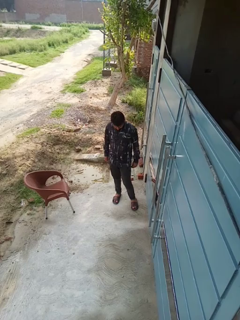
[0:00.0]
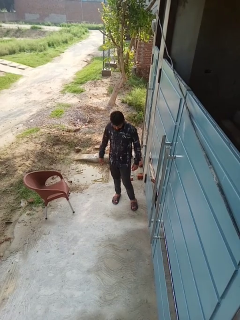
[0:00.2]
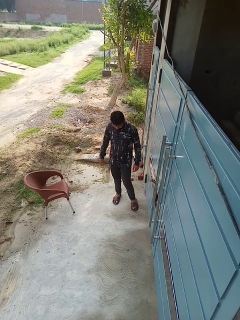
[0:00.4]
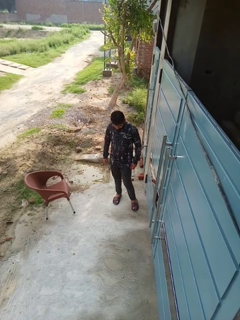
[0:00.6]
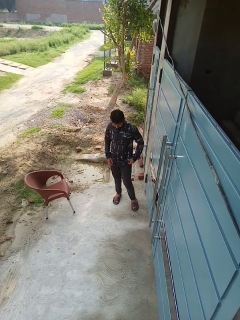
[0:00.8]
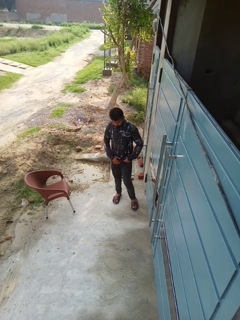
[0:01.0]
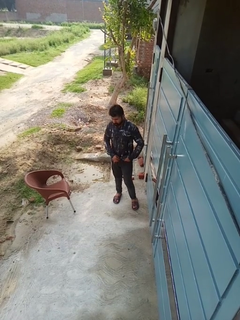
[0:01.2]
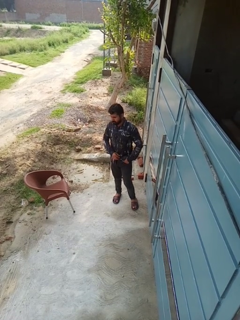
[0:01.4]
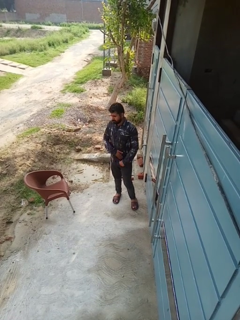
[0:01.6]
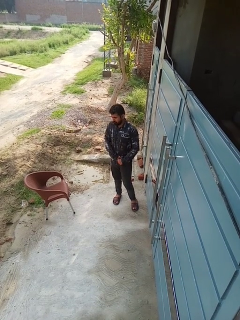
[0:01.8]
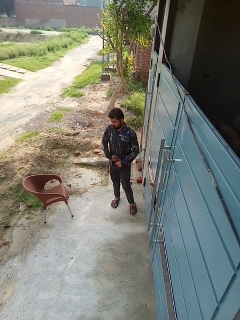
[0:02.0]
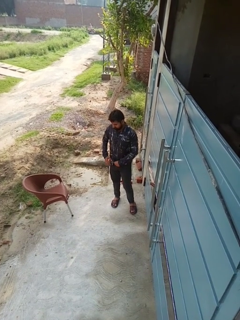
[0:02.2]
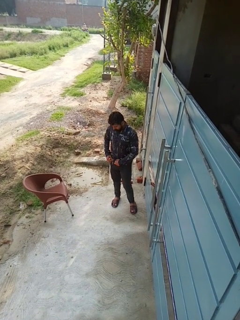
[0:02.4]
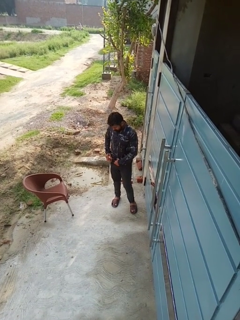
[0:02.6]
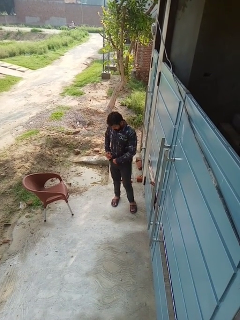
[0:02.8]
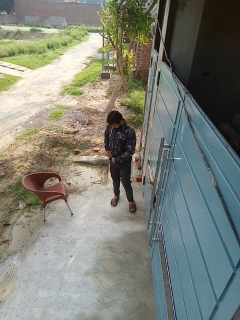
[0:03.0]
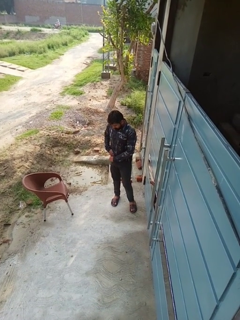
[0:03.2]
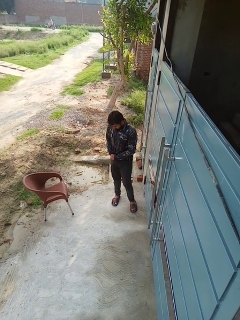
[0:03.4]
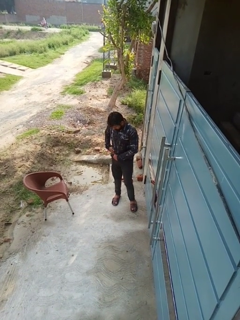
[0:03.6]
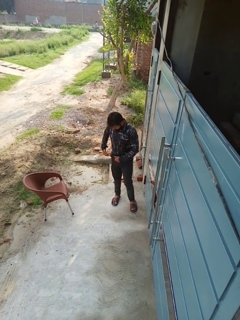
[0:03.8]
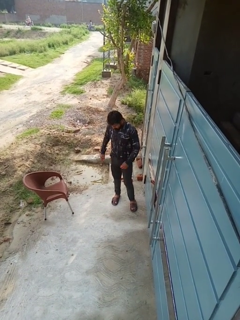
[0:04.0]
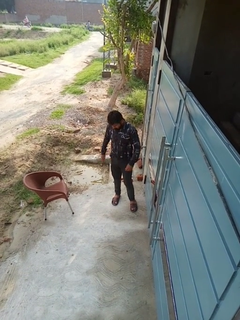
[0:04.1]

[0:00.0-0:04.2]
person tucks in shirt

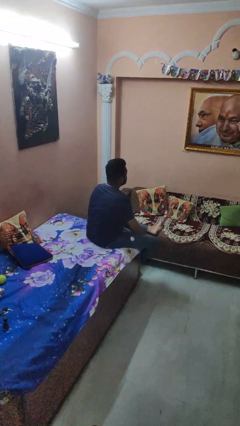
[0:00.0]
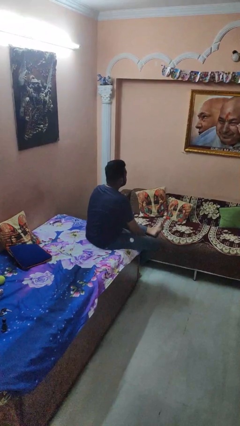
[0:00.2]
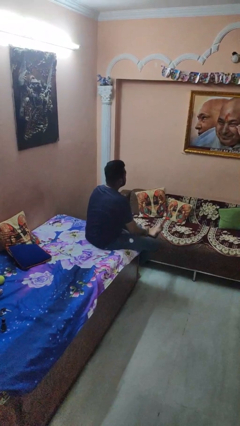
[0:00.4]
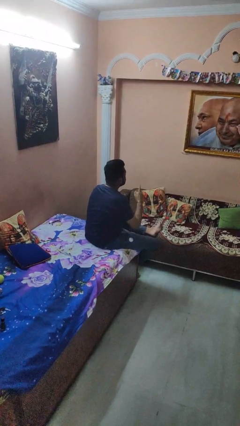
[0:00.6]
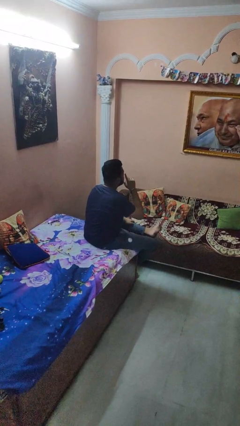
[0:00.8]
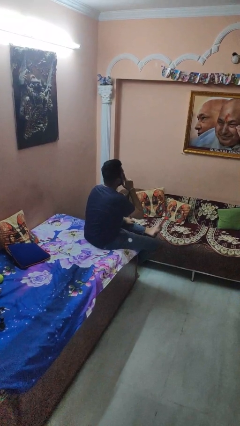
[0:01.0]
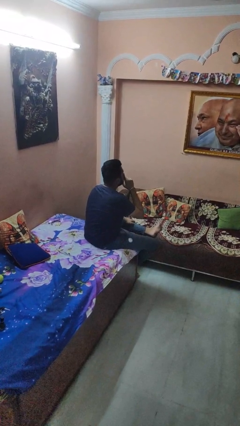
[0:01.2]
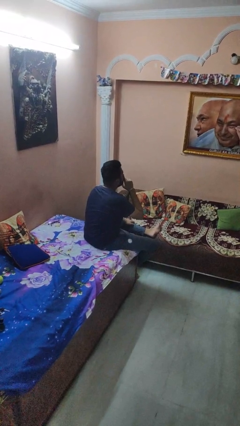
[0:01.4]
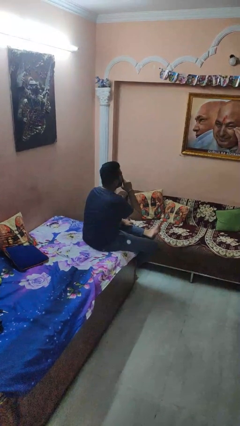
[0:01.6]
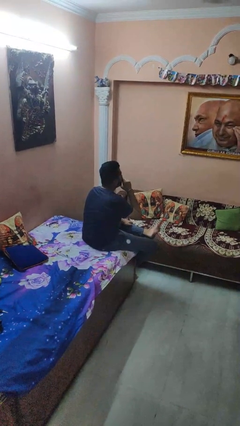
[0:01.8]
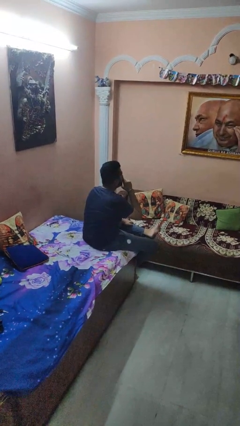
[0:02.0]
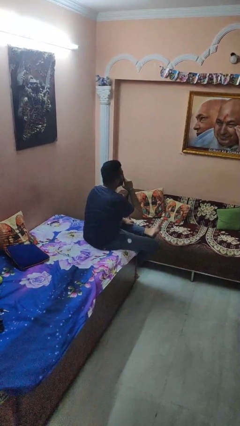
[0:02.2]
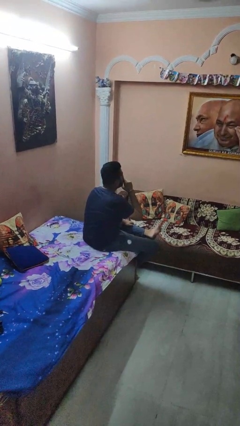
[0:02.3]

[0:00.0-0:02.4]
person gestures be quiet

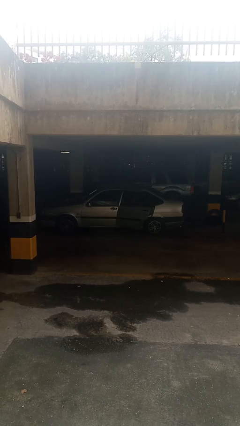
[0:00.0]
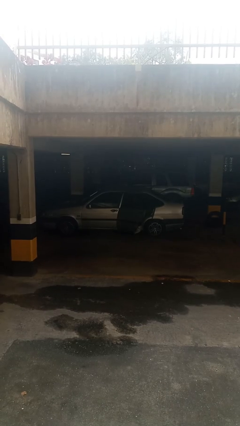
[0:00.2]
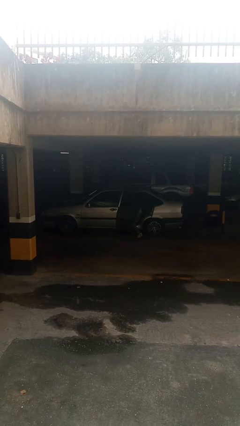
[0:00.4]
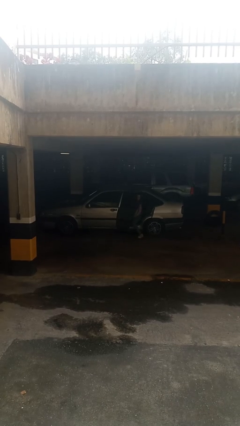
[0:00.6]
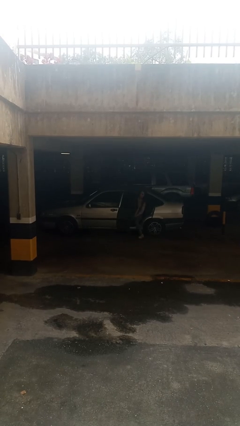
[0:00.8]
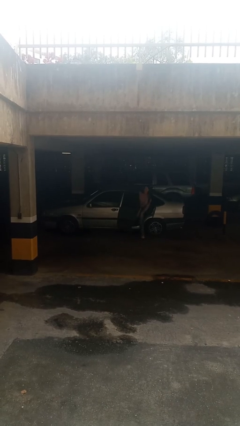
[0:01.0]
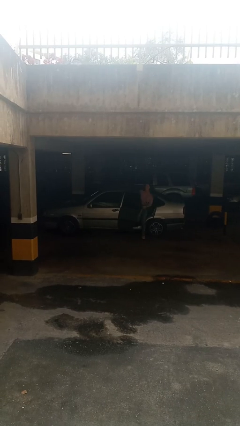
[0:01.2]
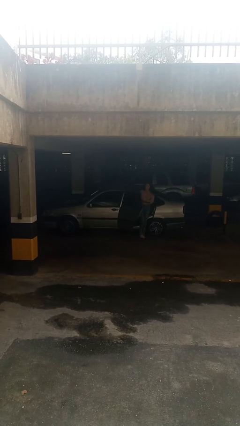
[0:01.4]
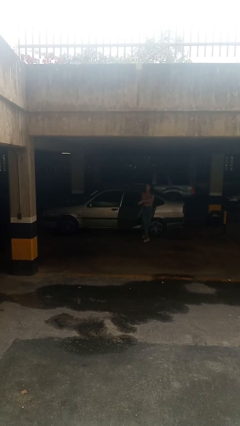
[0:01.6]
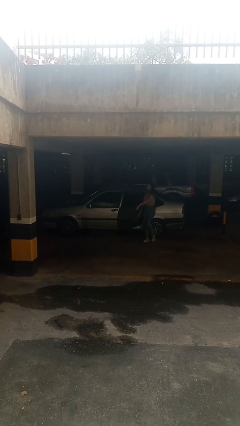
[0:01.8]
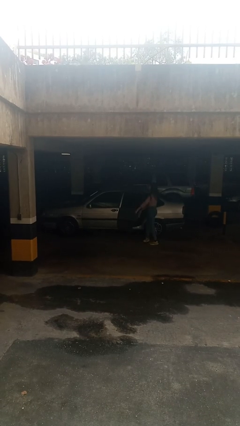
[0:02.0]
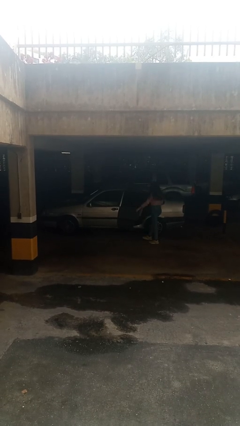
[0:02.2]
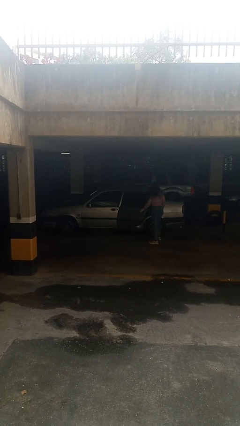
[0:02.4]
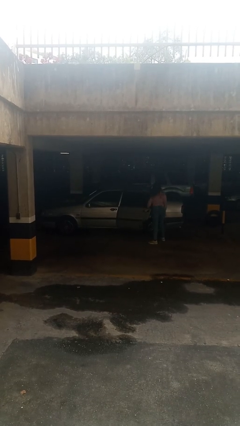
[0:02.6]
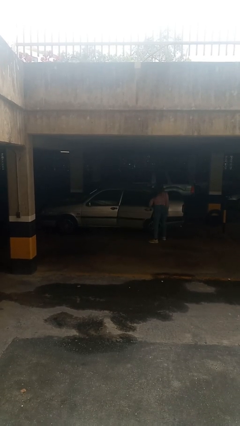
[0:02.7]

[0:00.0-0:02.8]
car drops off person

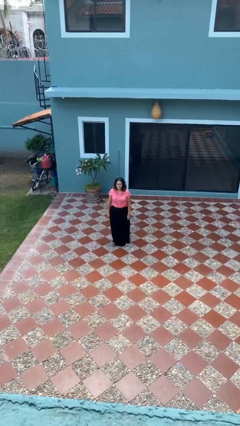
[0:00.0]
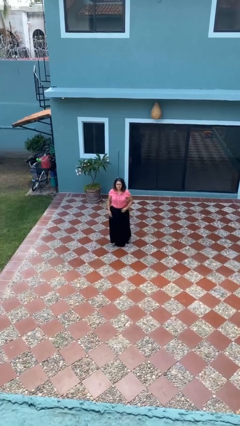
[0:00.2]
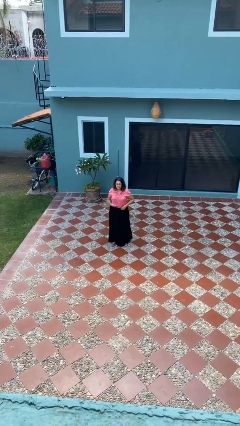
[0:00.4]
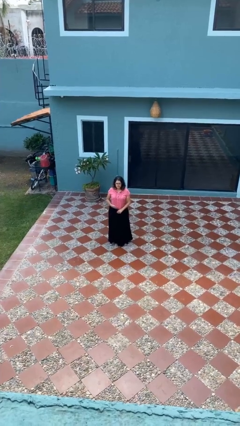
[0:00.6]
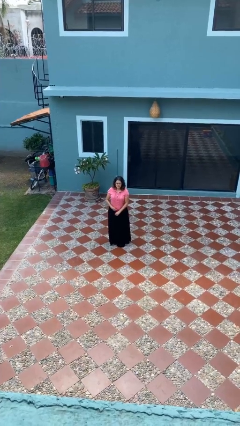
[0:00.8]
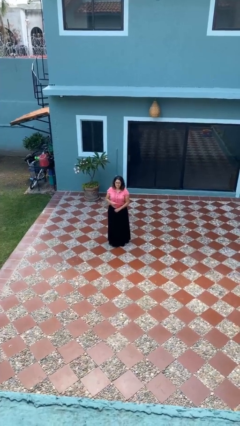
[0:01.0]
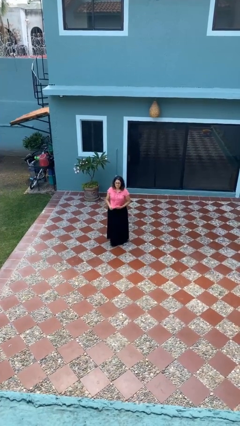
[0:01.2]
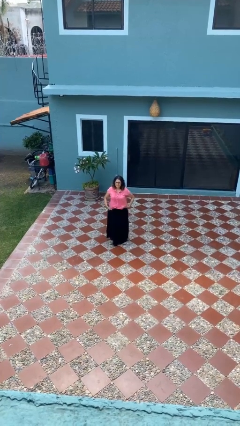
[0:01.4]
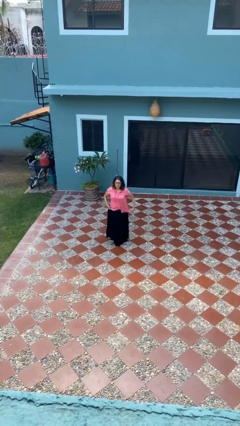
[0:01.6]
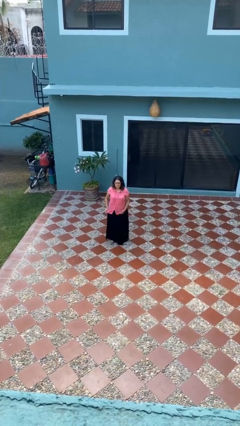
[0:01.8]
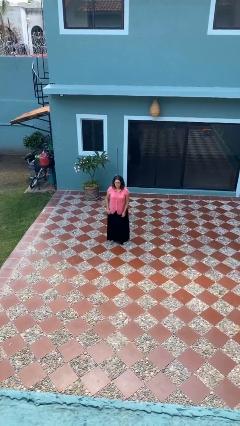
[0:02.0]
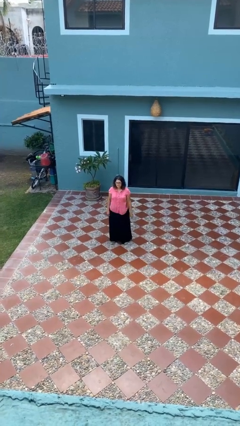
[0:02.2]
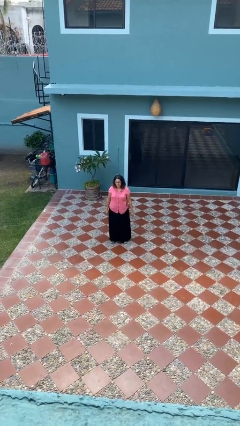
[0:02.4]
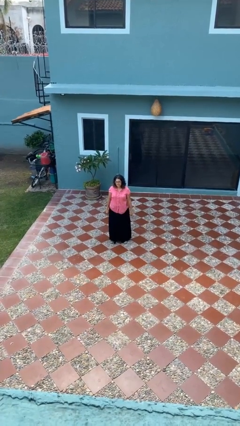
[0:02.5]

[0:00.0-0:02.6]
person untucks shirt

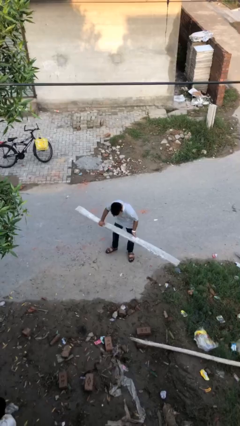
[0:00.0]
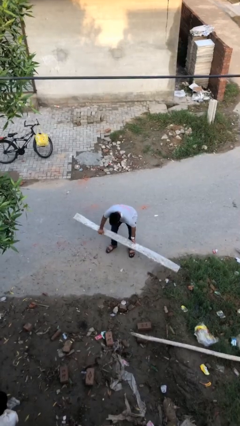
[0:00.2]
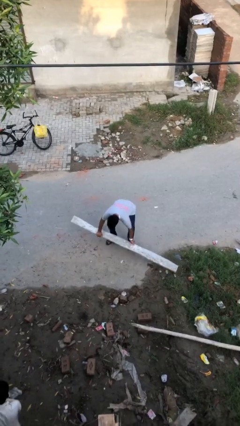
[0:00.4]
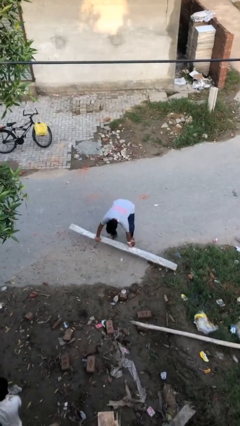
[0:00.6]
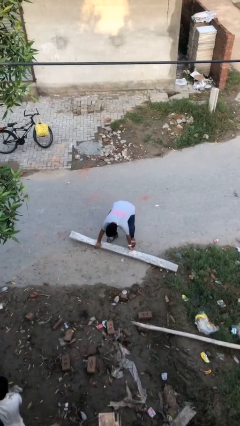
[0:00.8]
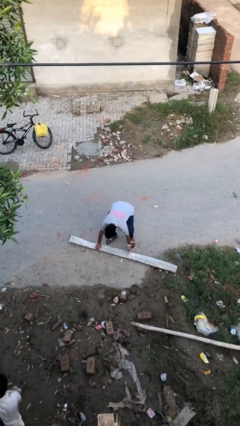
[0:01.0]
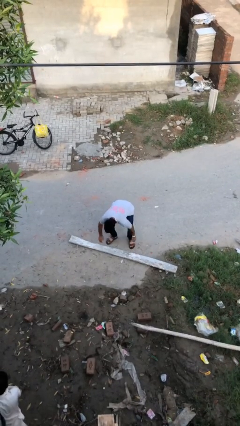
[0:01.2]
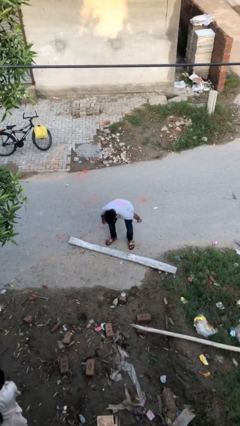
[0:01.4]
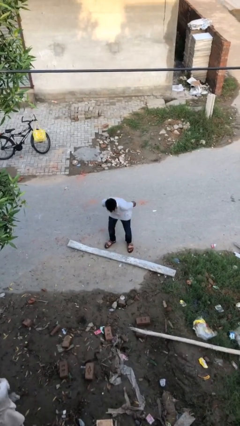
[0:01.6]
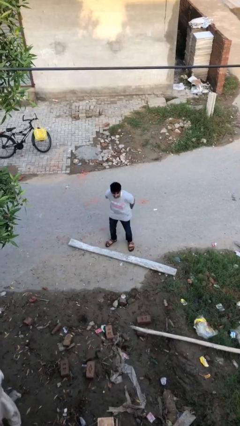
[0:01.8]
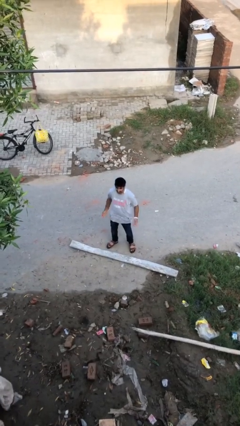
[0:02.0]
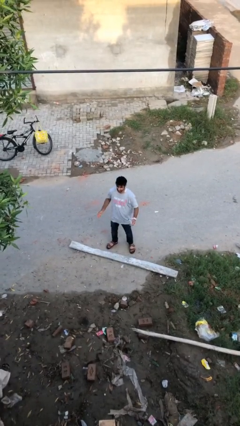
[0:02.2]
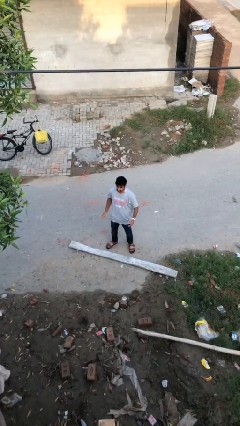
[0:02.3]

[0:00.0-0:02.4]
person puts down object on floor

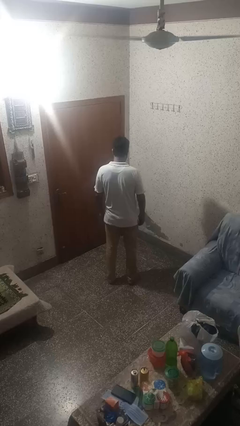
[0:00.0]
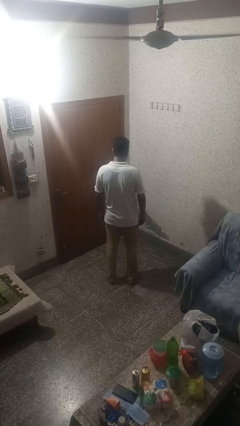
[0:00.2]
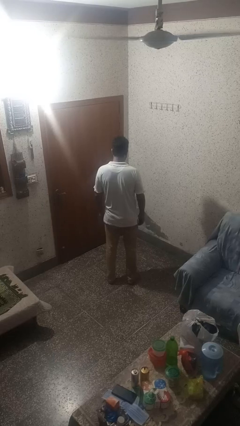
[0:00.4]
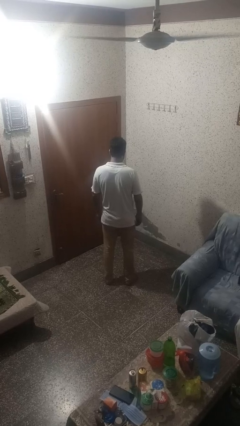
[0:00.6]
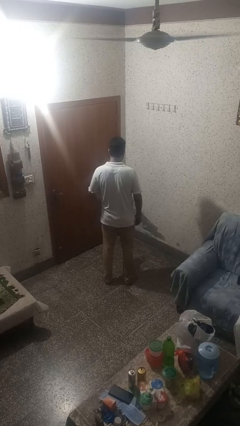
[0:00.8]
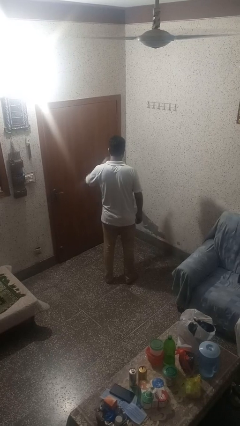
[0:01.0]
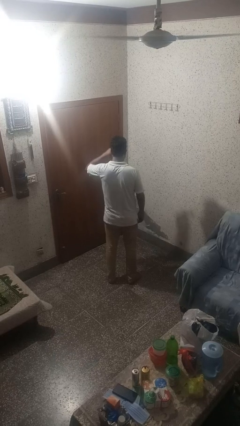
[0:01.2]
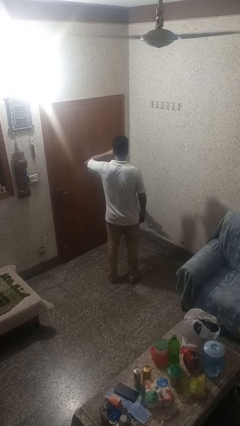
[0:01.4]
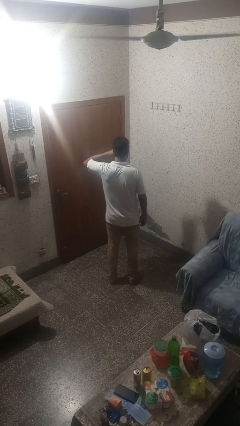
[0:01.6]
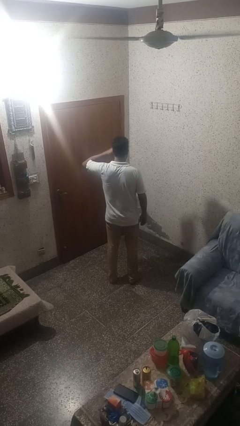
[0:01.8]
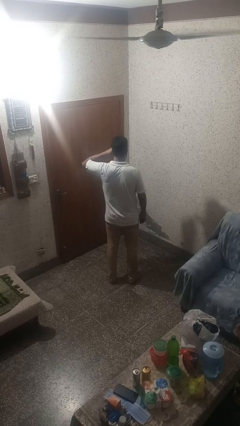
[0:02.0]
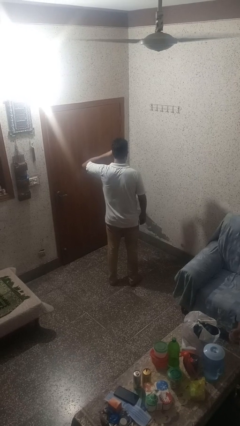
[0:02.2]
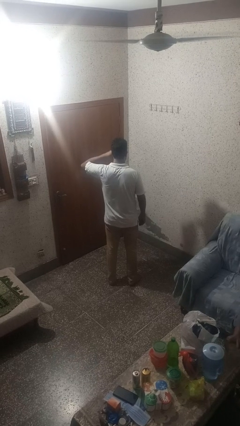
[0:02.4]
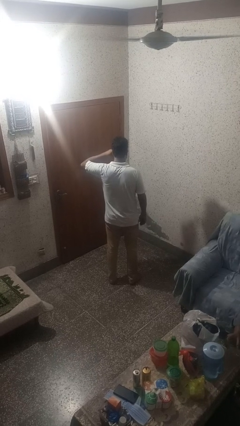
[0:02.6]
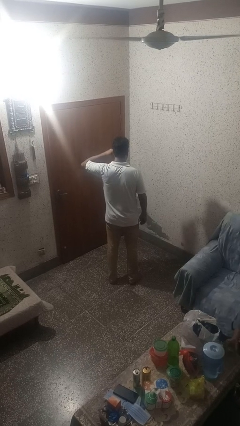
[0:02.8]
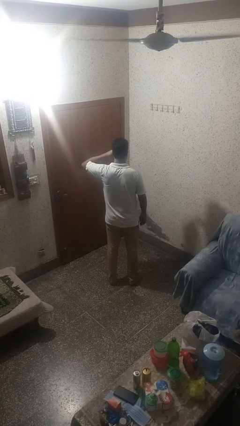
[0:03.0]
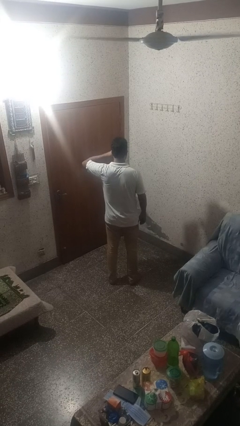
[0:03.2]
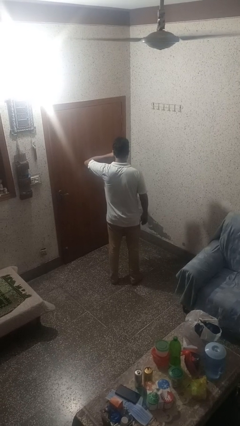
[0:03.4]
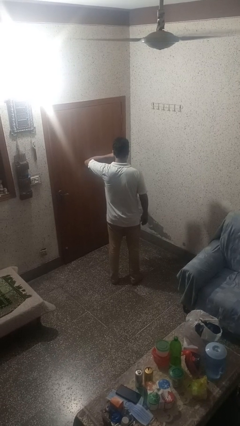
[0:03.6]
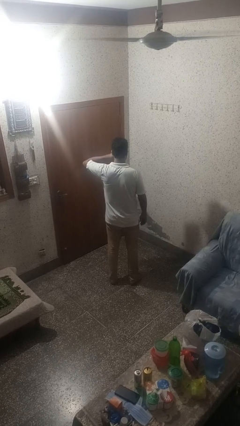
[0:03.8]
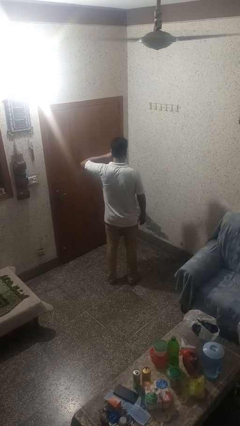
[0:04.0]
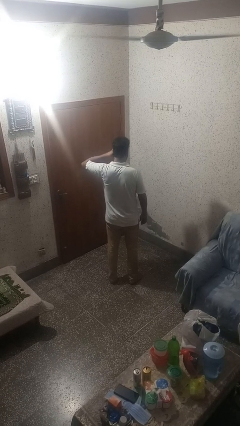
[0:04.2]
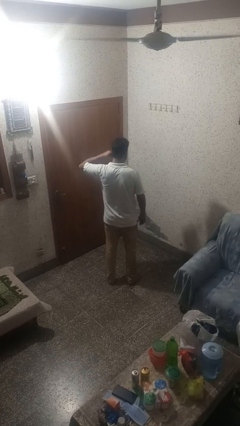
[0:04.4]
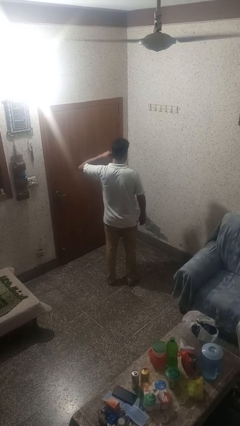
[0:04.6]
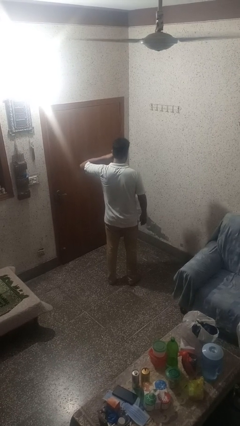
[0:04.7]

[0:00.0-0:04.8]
person brushes teeth
